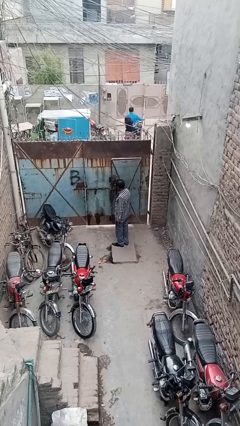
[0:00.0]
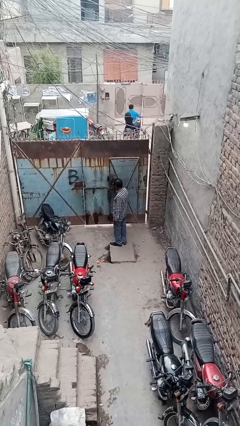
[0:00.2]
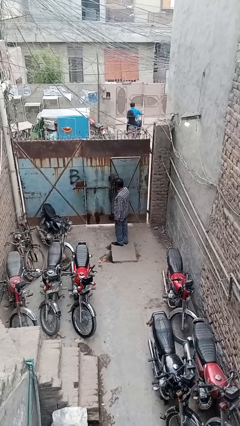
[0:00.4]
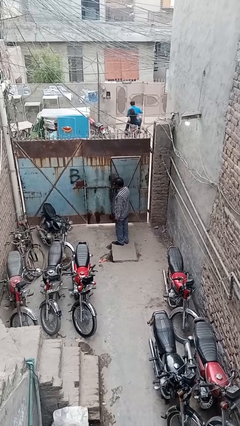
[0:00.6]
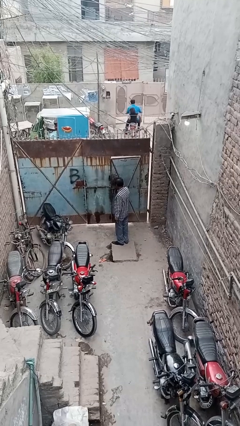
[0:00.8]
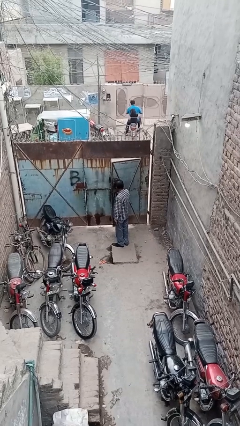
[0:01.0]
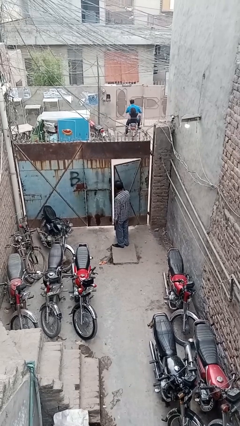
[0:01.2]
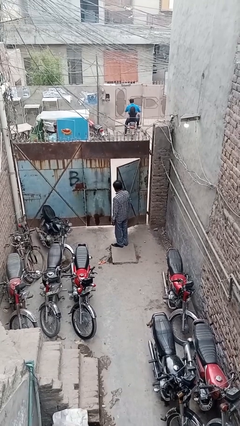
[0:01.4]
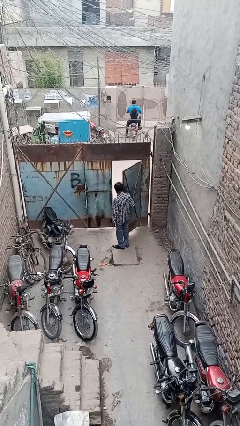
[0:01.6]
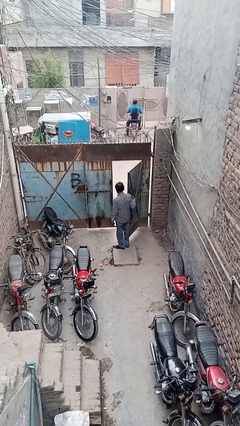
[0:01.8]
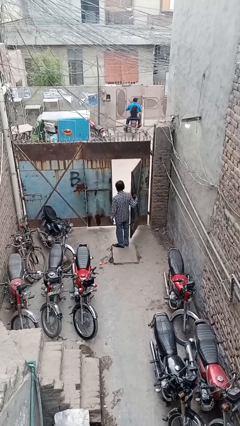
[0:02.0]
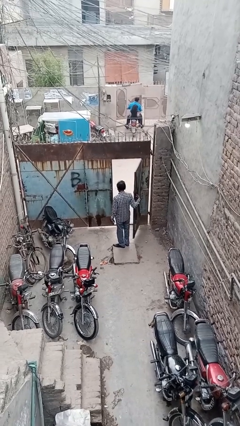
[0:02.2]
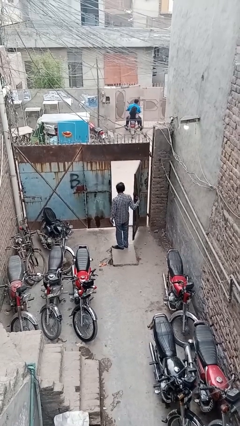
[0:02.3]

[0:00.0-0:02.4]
person opens facility door

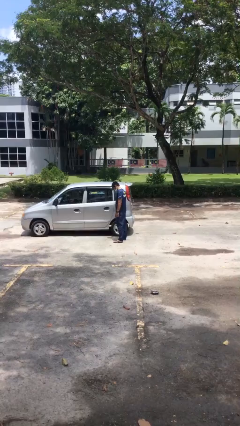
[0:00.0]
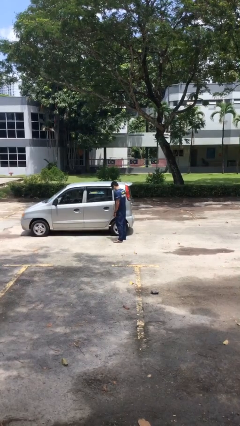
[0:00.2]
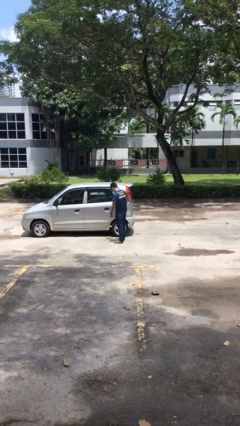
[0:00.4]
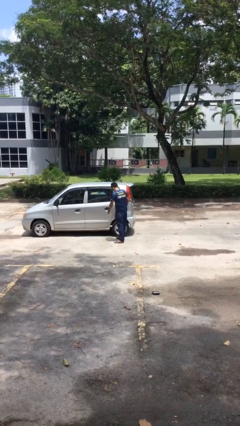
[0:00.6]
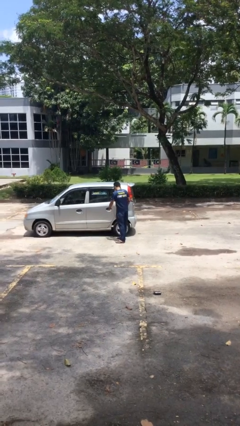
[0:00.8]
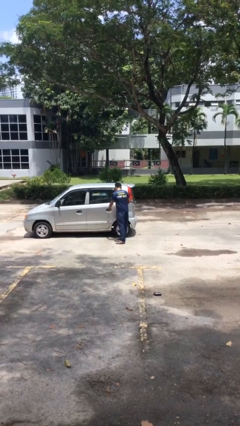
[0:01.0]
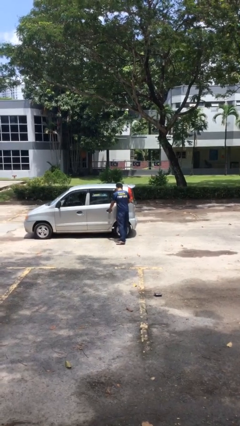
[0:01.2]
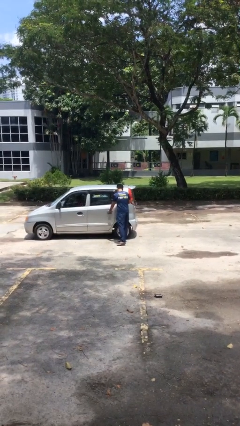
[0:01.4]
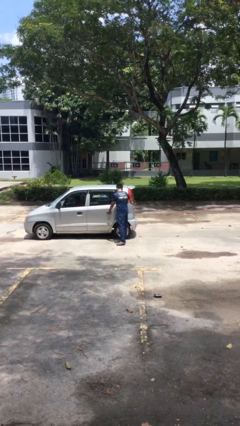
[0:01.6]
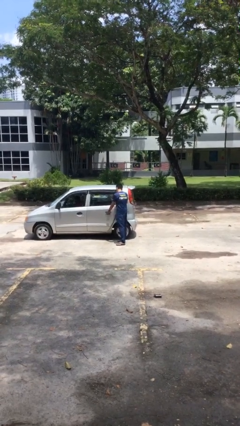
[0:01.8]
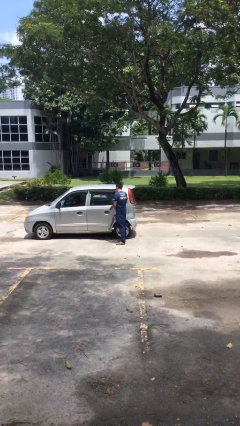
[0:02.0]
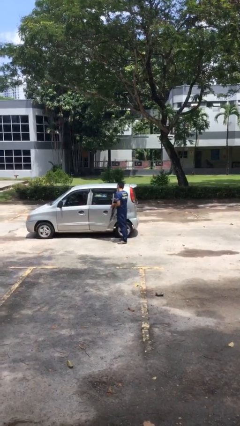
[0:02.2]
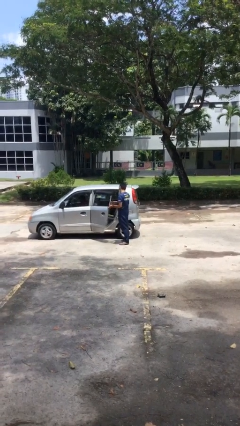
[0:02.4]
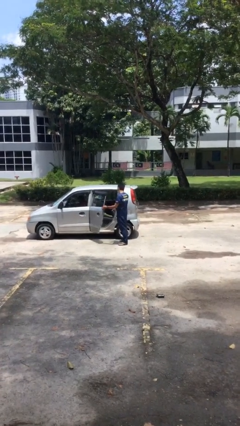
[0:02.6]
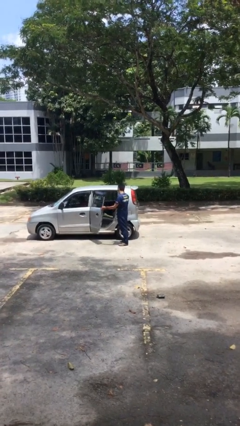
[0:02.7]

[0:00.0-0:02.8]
person opens car door

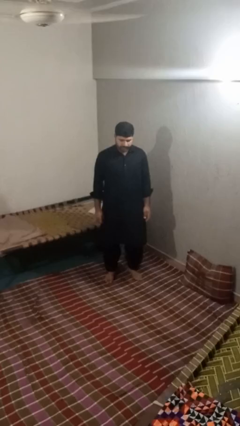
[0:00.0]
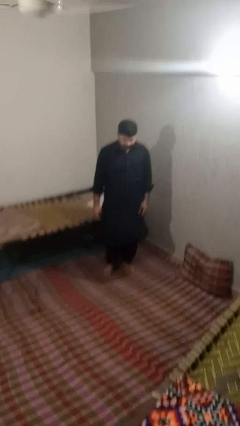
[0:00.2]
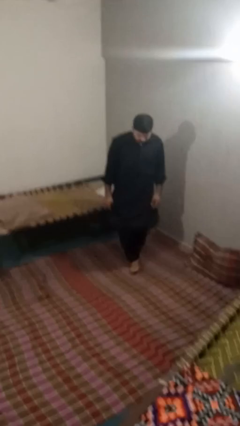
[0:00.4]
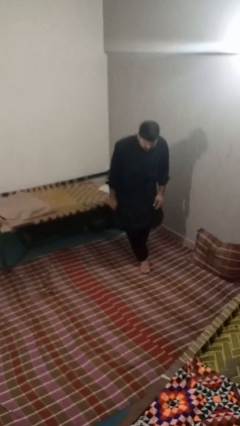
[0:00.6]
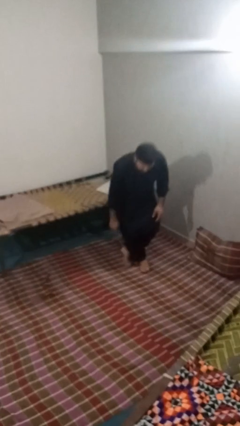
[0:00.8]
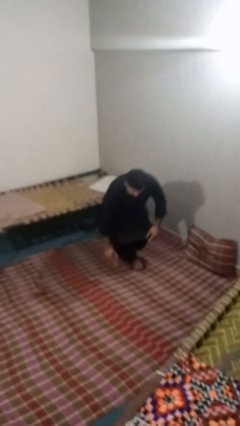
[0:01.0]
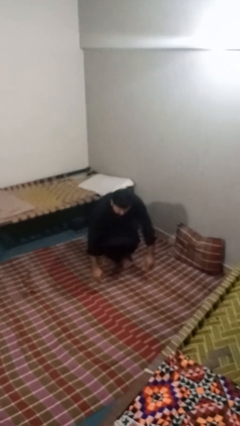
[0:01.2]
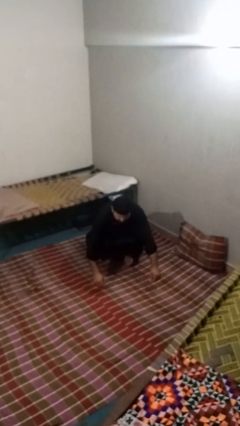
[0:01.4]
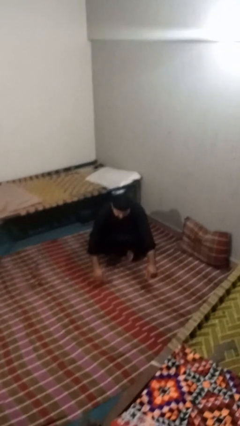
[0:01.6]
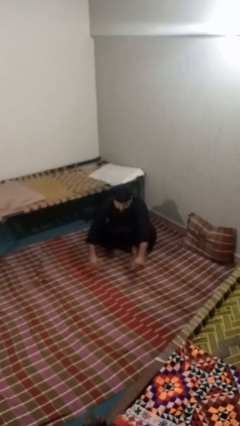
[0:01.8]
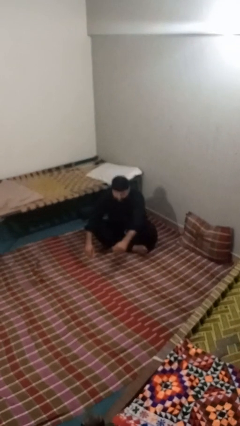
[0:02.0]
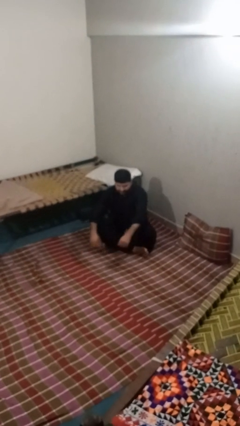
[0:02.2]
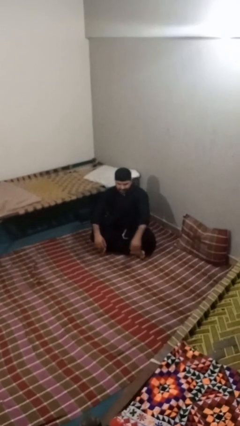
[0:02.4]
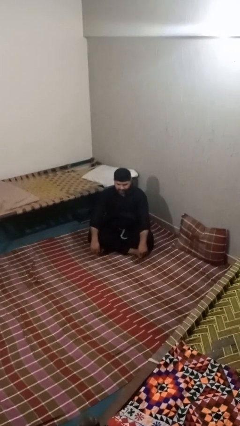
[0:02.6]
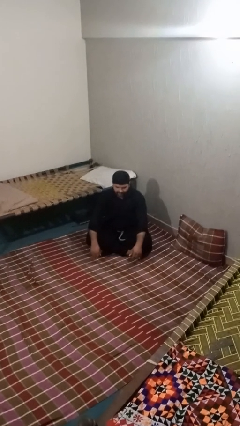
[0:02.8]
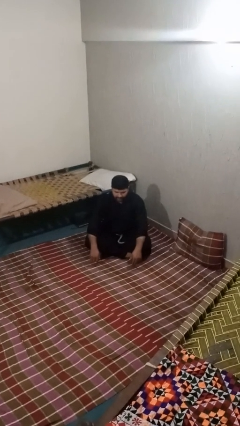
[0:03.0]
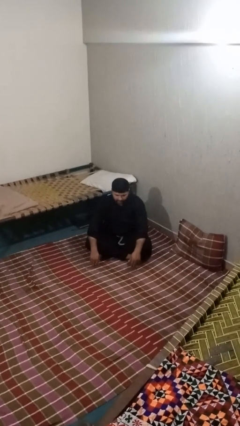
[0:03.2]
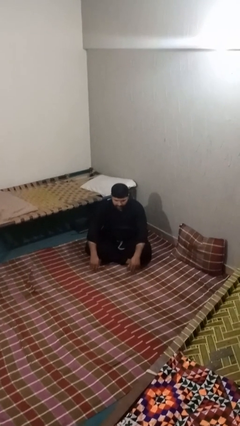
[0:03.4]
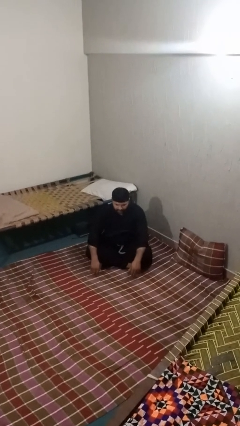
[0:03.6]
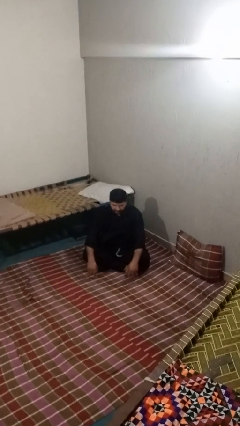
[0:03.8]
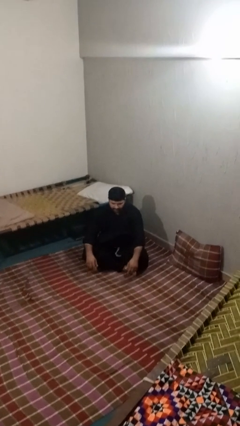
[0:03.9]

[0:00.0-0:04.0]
person sits crisscross

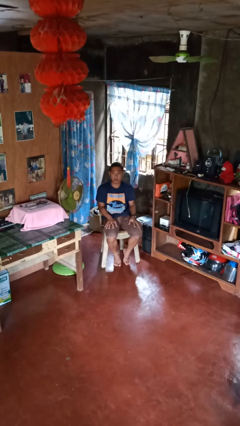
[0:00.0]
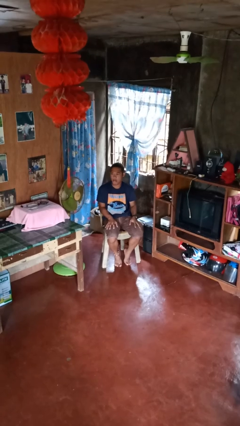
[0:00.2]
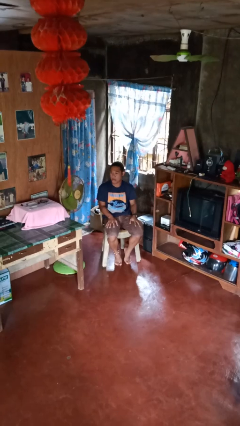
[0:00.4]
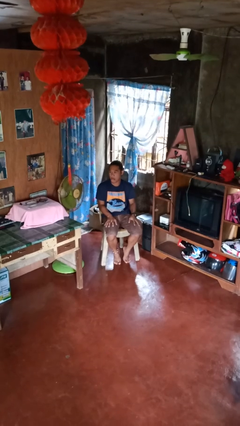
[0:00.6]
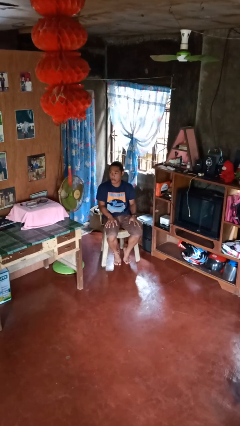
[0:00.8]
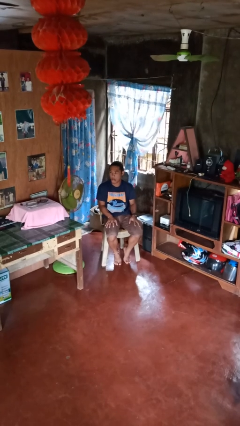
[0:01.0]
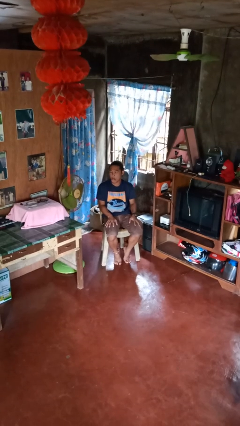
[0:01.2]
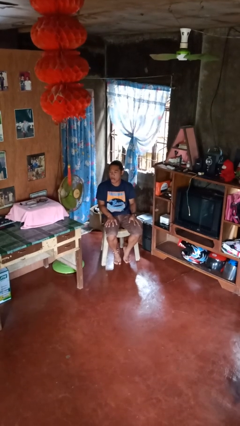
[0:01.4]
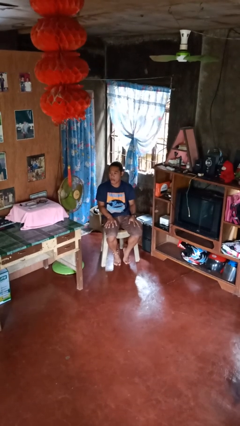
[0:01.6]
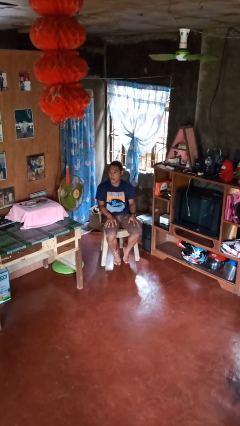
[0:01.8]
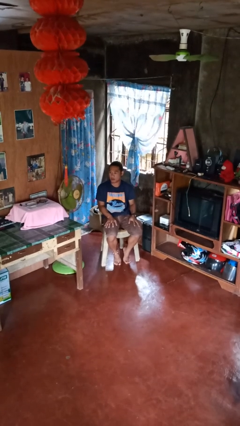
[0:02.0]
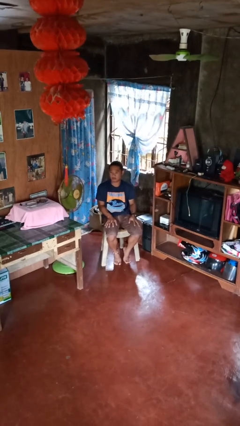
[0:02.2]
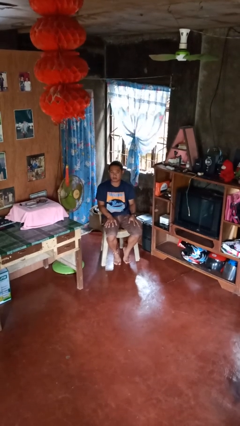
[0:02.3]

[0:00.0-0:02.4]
person sticks out tongue

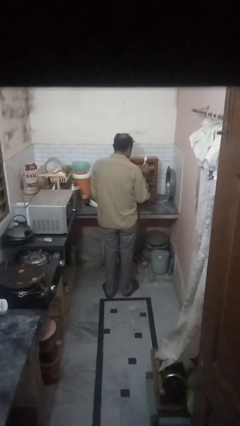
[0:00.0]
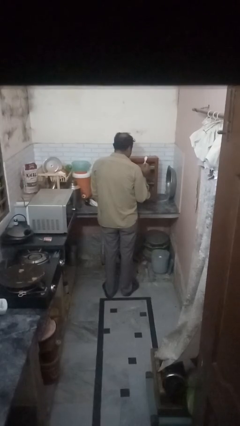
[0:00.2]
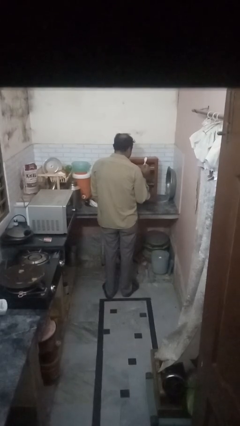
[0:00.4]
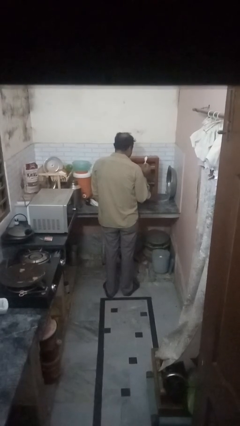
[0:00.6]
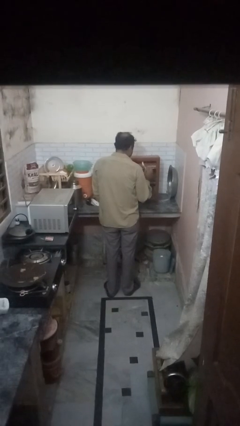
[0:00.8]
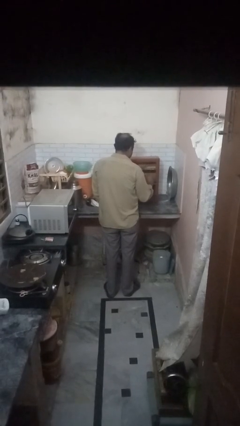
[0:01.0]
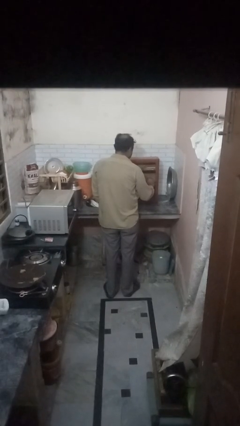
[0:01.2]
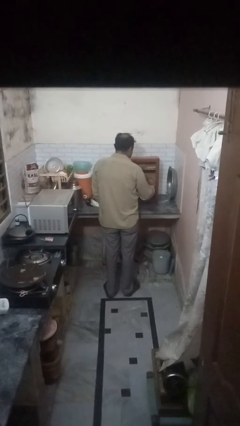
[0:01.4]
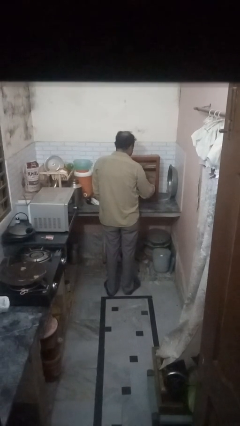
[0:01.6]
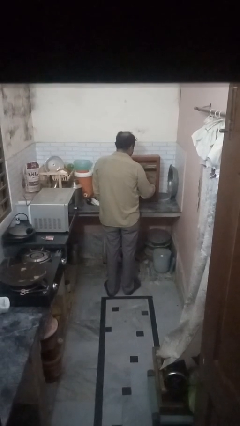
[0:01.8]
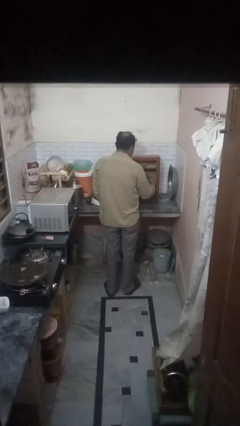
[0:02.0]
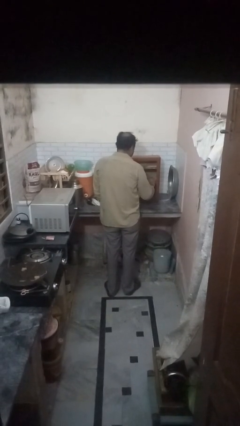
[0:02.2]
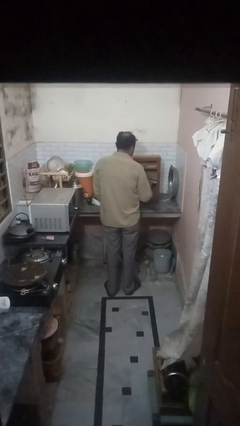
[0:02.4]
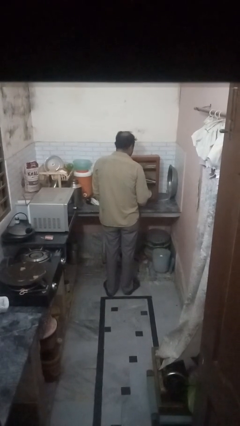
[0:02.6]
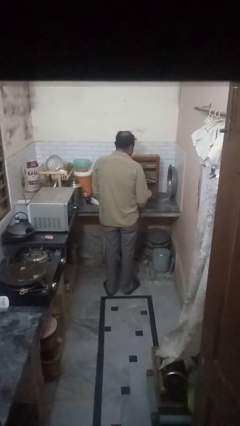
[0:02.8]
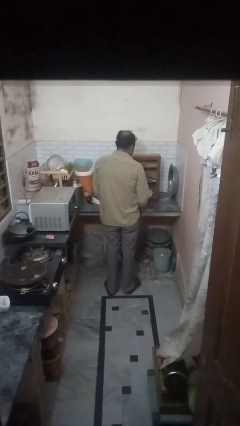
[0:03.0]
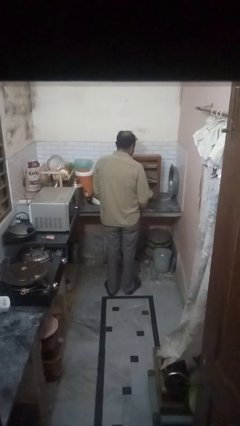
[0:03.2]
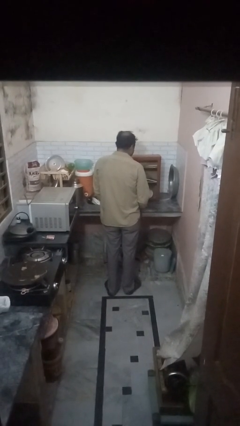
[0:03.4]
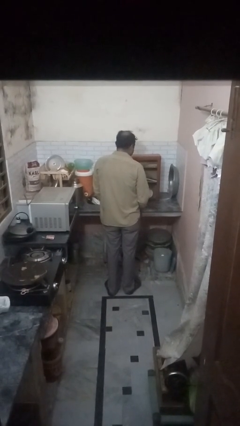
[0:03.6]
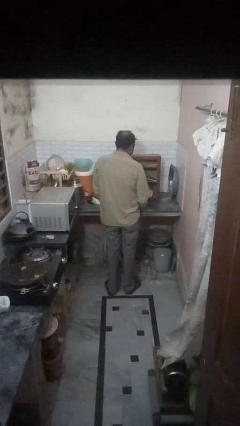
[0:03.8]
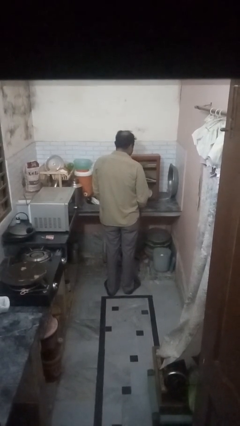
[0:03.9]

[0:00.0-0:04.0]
person takes object from cabinet

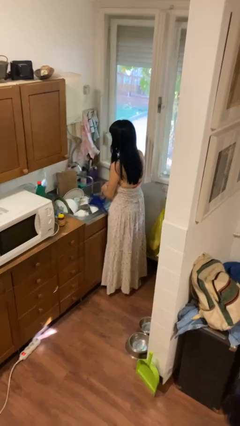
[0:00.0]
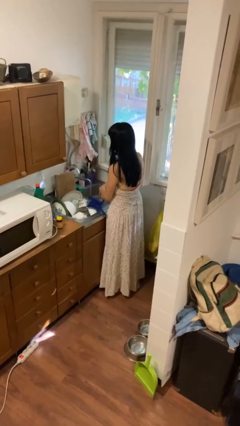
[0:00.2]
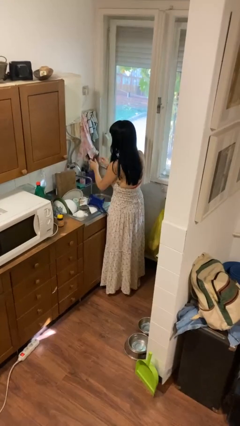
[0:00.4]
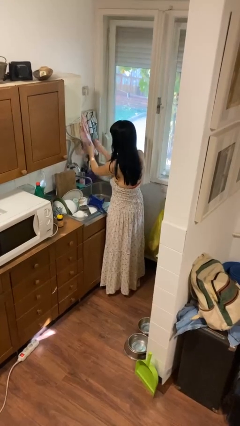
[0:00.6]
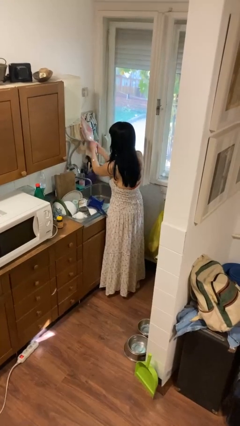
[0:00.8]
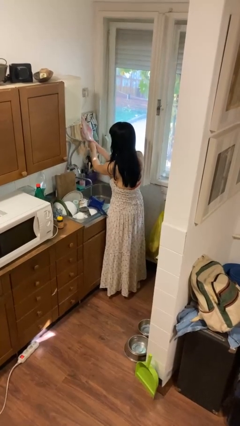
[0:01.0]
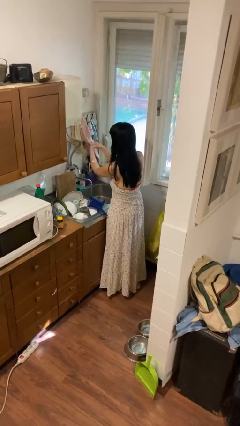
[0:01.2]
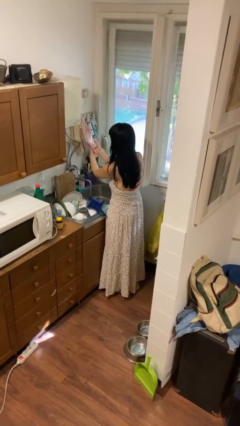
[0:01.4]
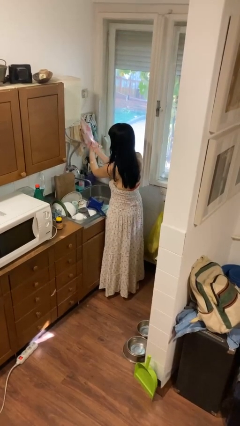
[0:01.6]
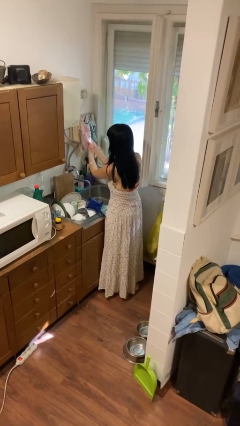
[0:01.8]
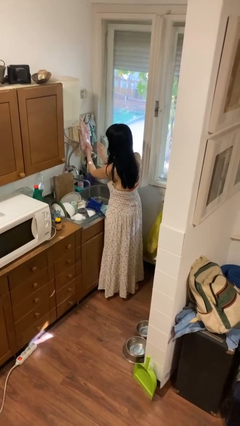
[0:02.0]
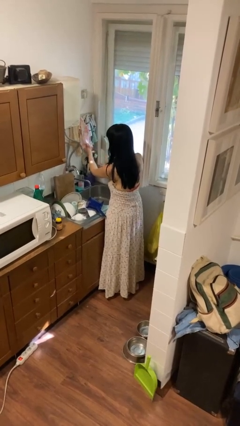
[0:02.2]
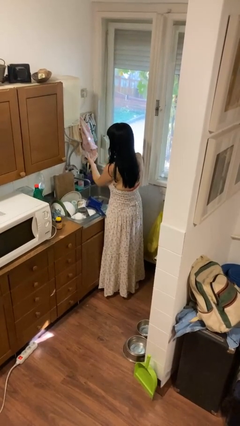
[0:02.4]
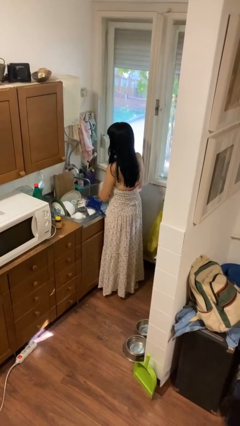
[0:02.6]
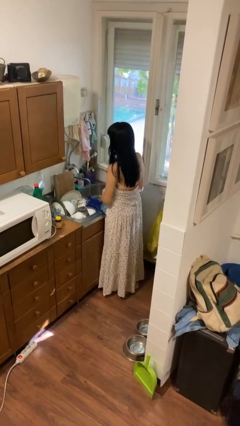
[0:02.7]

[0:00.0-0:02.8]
person dries hands with towel
